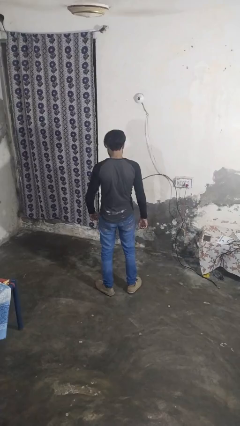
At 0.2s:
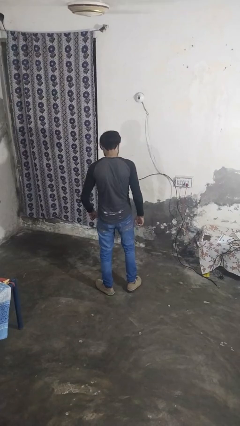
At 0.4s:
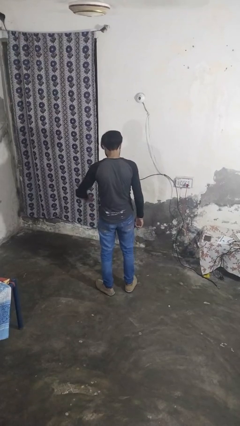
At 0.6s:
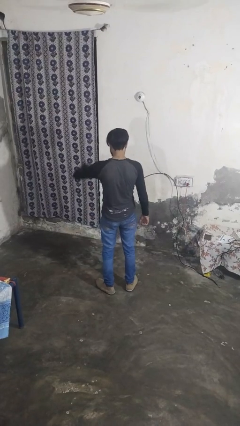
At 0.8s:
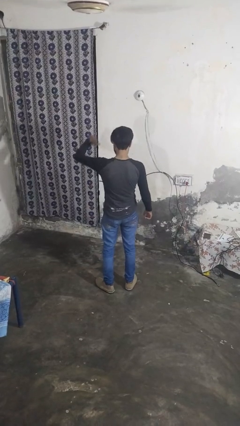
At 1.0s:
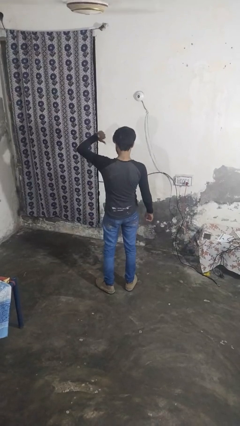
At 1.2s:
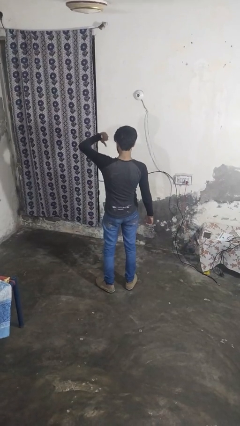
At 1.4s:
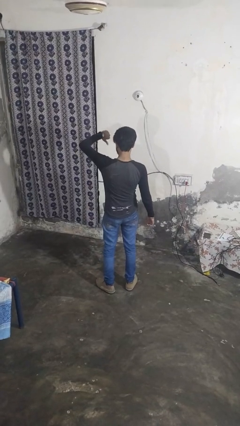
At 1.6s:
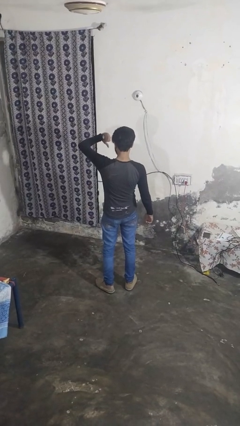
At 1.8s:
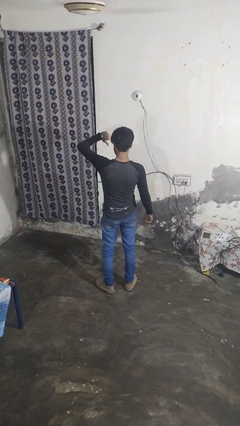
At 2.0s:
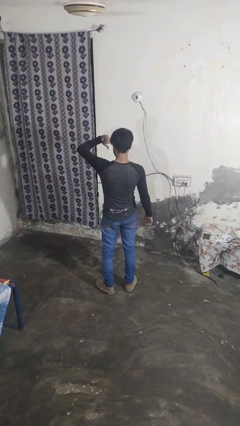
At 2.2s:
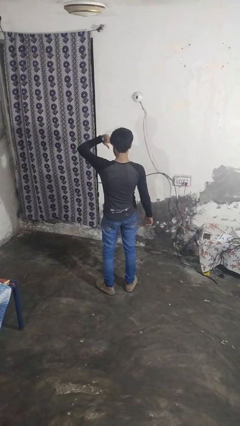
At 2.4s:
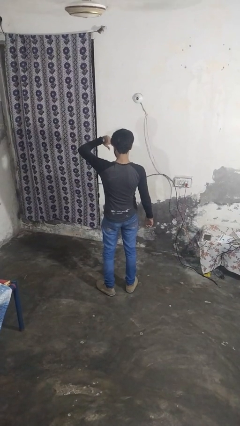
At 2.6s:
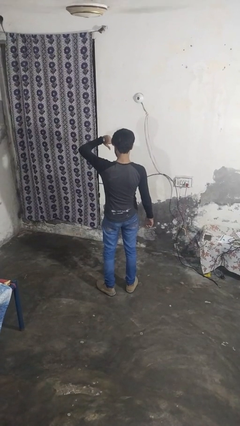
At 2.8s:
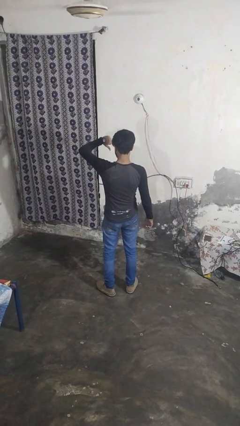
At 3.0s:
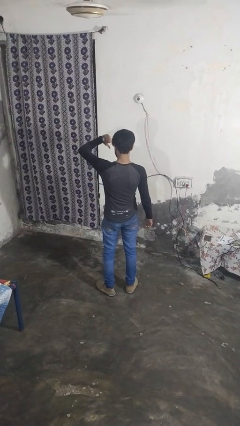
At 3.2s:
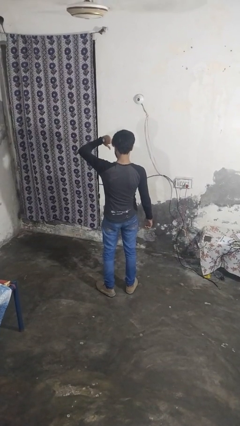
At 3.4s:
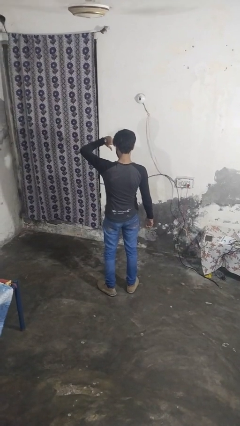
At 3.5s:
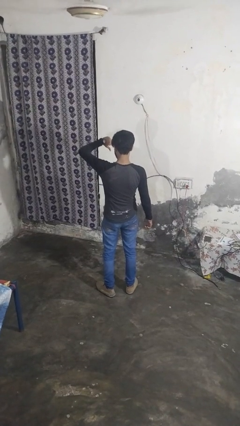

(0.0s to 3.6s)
person gestures thumbs down

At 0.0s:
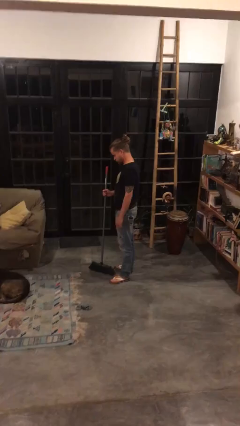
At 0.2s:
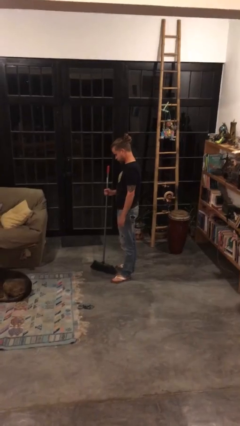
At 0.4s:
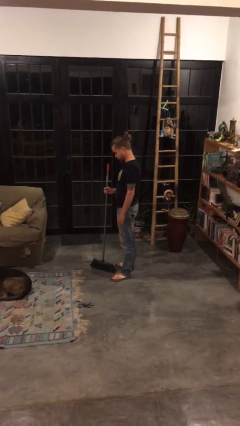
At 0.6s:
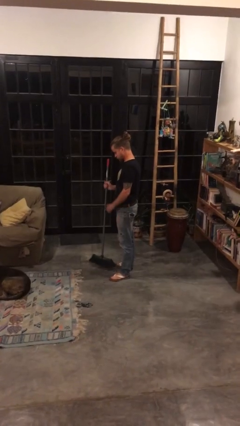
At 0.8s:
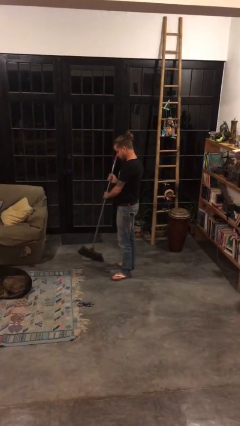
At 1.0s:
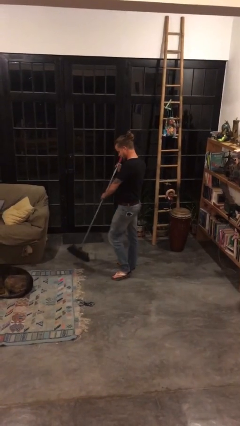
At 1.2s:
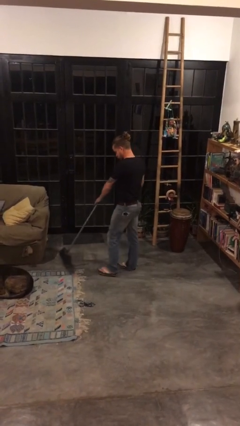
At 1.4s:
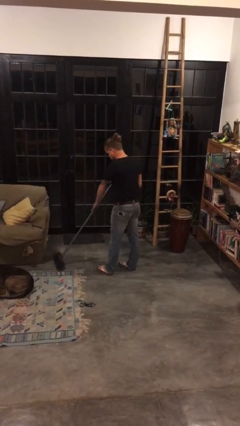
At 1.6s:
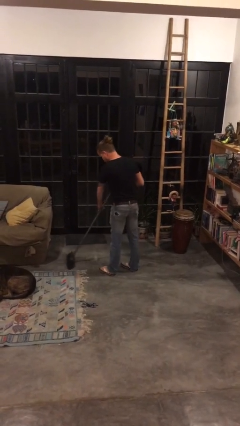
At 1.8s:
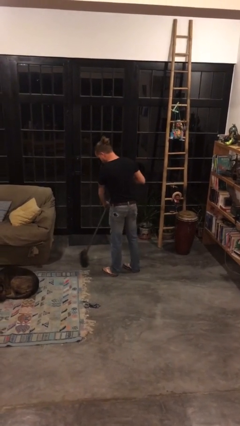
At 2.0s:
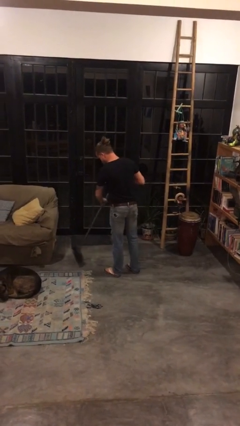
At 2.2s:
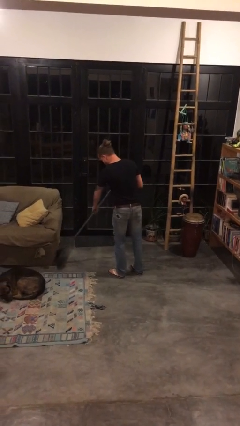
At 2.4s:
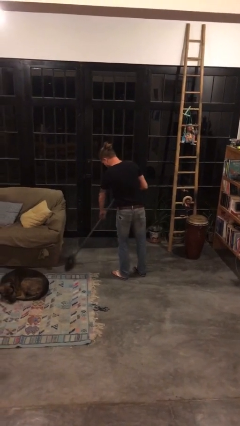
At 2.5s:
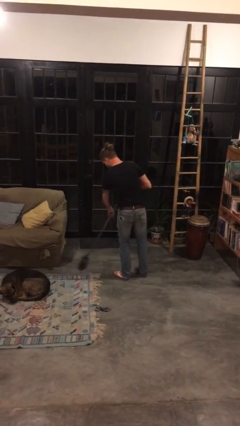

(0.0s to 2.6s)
person sweeps floor

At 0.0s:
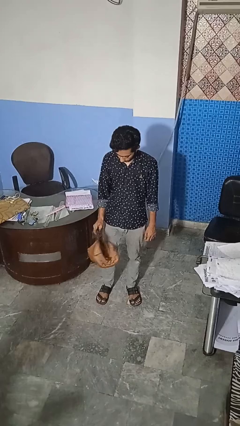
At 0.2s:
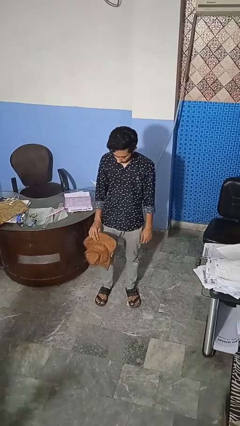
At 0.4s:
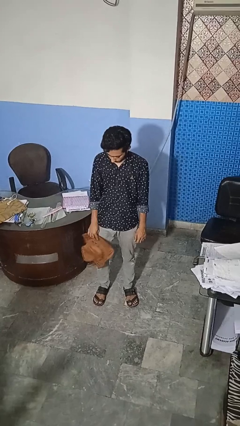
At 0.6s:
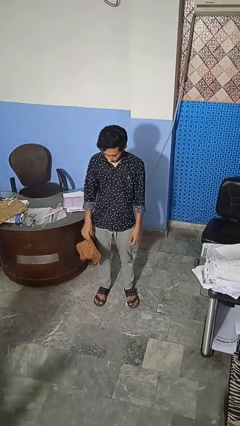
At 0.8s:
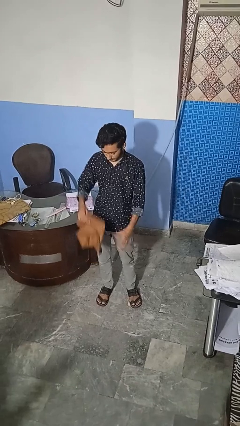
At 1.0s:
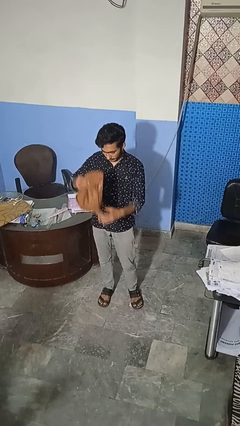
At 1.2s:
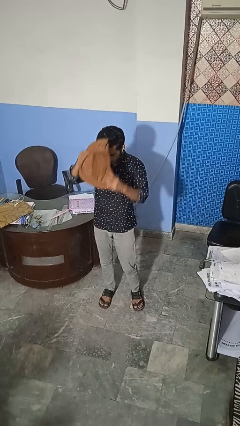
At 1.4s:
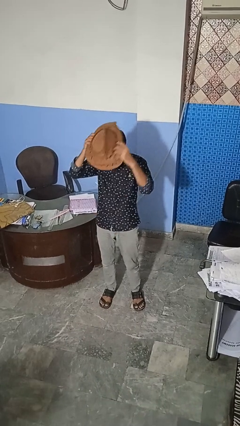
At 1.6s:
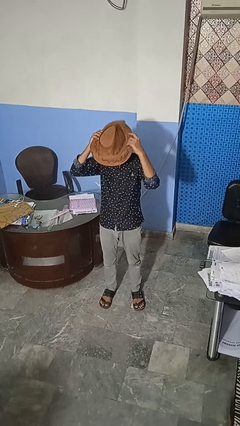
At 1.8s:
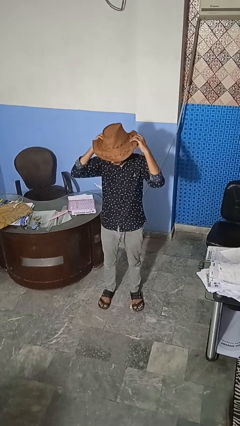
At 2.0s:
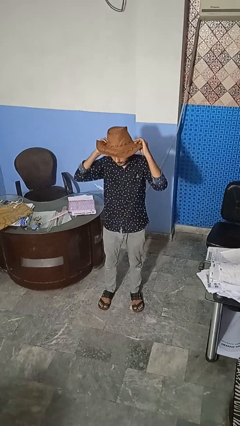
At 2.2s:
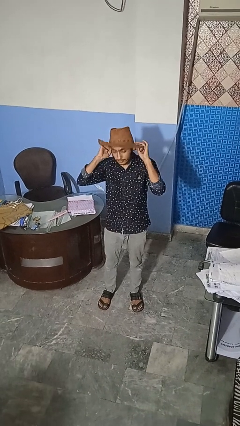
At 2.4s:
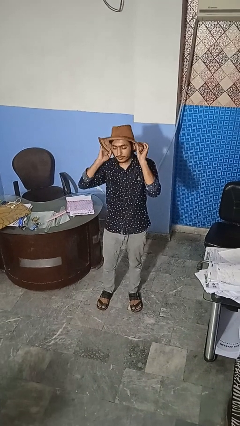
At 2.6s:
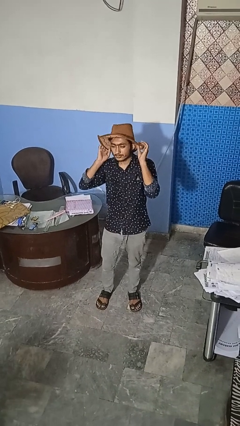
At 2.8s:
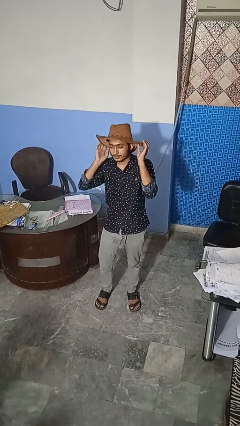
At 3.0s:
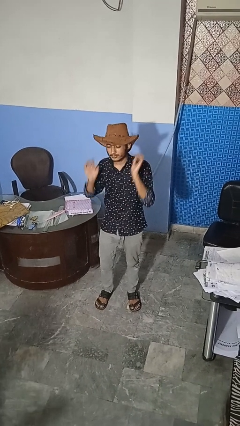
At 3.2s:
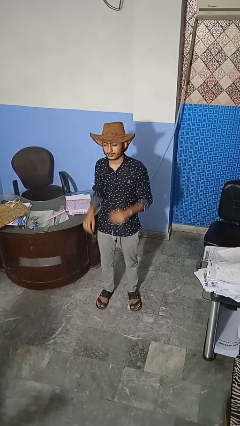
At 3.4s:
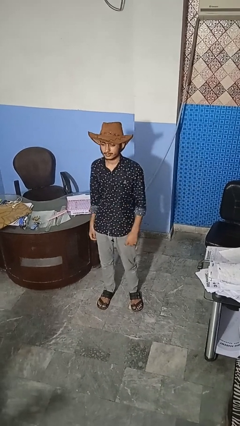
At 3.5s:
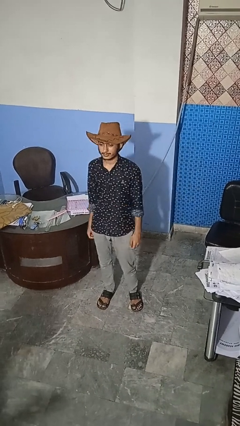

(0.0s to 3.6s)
person puts on hat

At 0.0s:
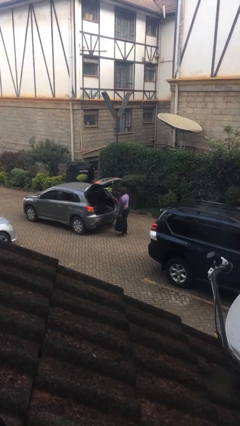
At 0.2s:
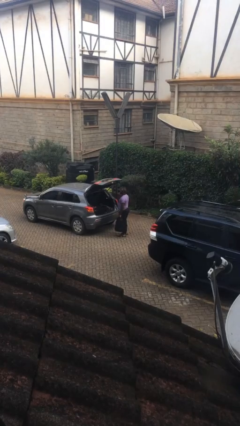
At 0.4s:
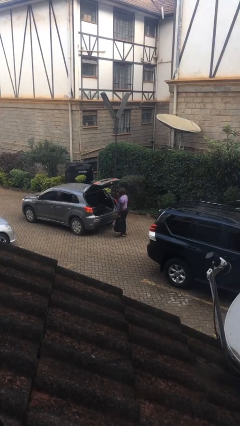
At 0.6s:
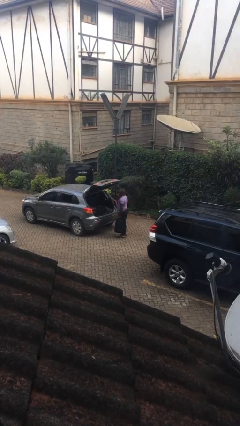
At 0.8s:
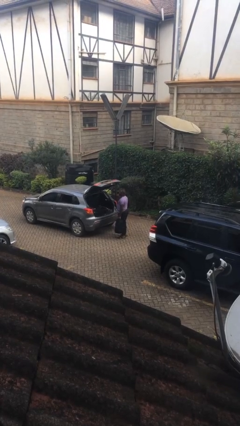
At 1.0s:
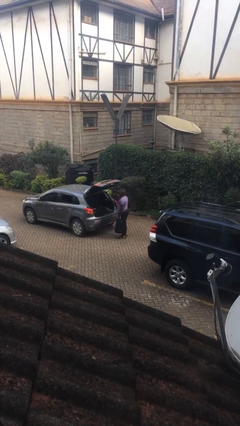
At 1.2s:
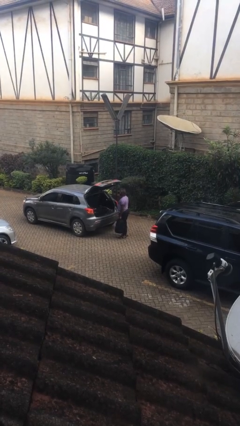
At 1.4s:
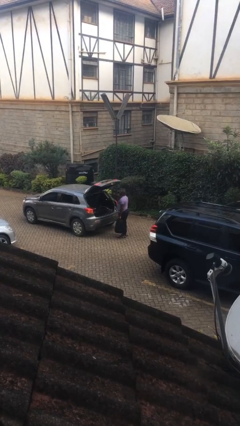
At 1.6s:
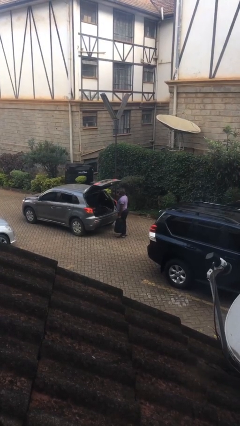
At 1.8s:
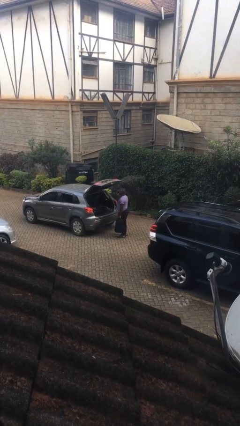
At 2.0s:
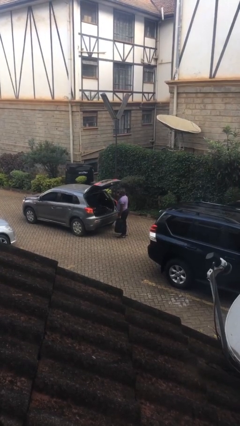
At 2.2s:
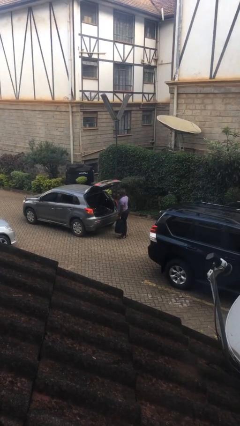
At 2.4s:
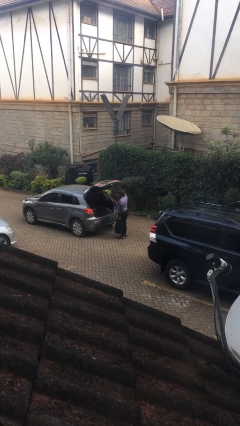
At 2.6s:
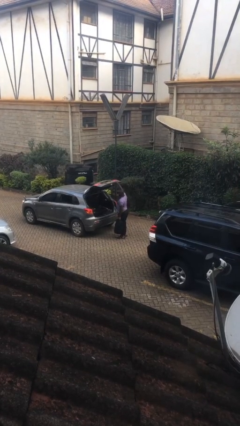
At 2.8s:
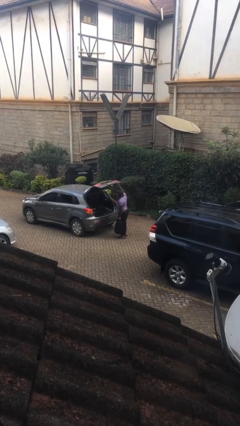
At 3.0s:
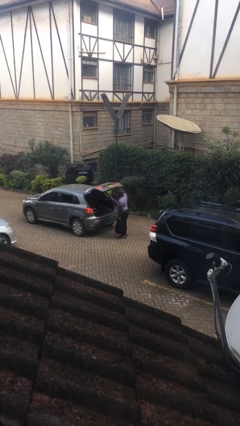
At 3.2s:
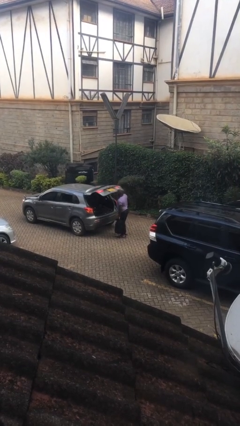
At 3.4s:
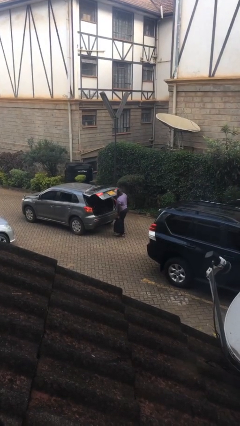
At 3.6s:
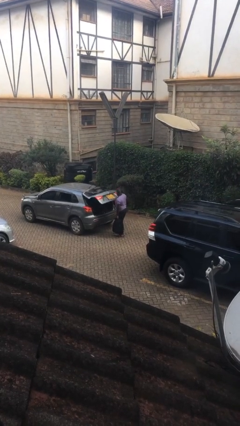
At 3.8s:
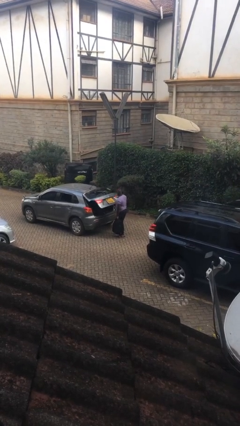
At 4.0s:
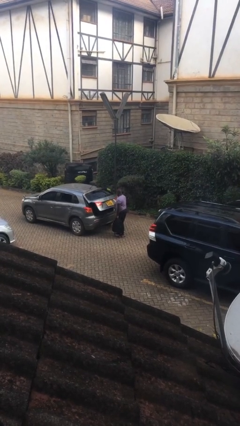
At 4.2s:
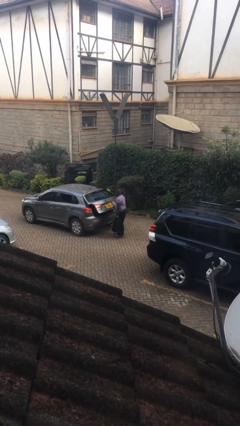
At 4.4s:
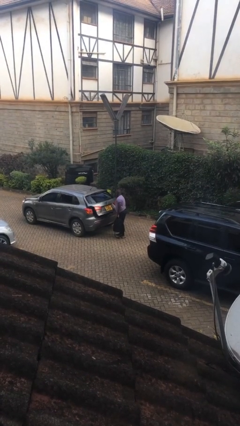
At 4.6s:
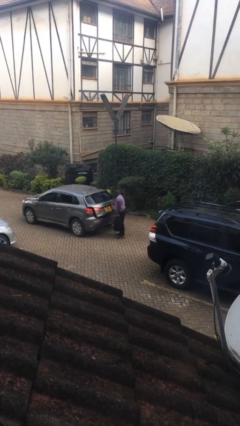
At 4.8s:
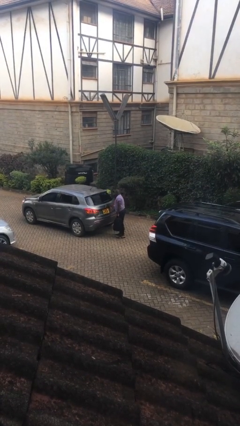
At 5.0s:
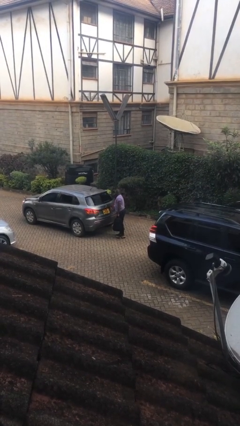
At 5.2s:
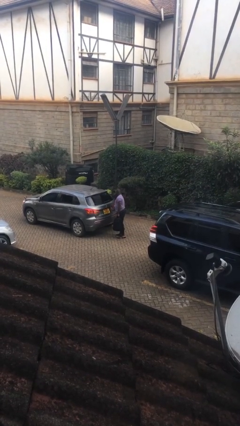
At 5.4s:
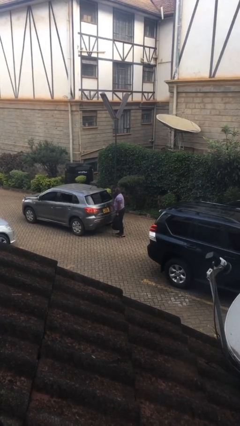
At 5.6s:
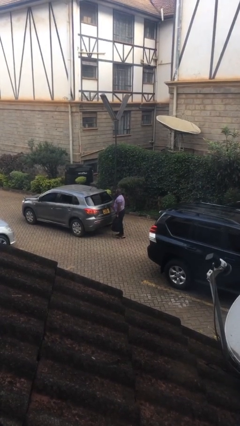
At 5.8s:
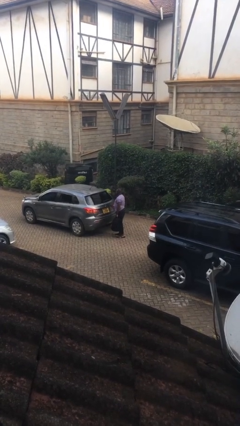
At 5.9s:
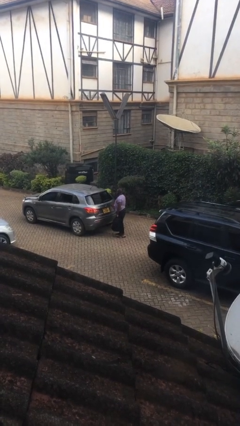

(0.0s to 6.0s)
person closes car trunk

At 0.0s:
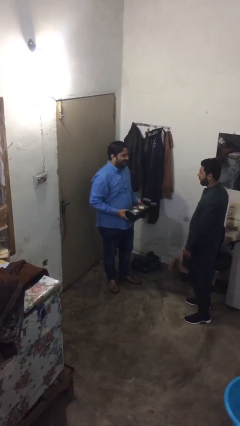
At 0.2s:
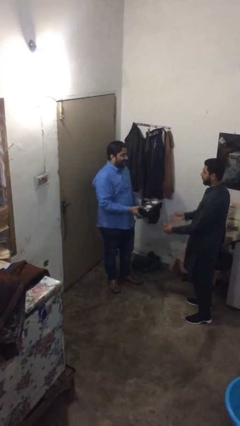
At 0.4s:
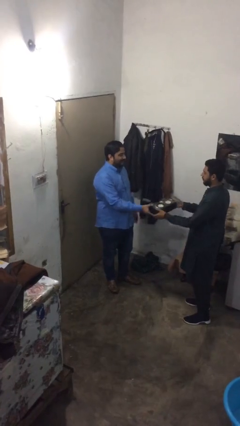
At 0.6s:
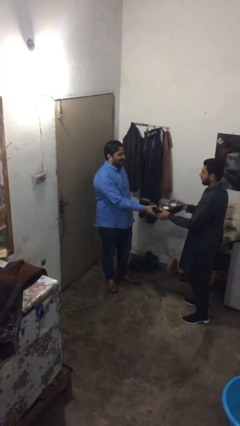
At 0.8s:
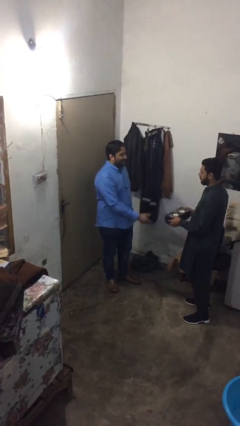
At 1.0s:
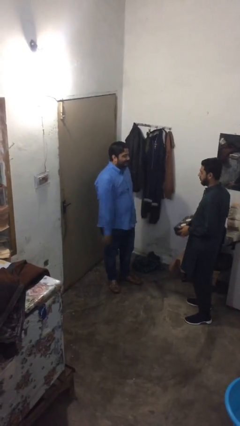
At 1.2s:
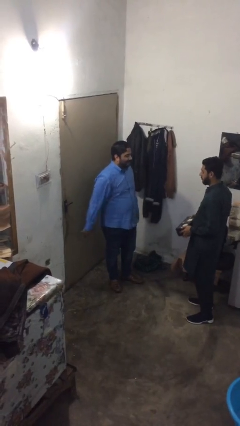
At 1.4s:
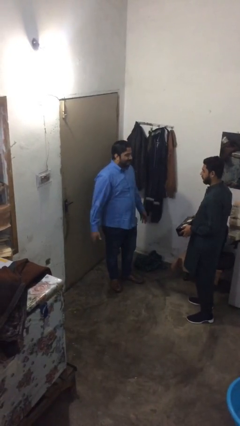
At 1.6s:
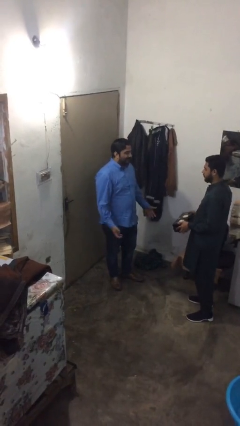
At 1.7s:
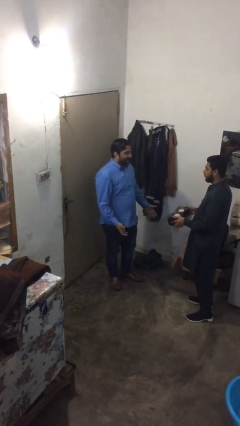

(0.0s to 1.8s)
person transfers object to person

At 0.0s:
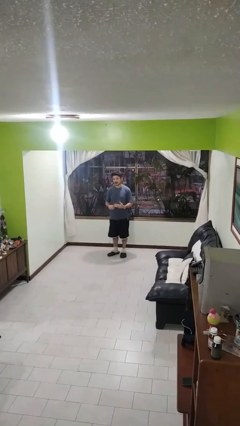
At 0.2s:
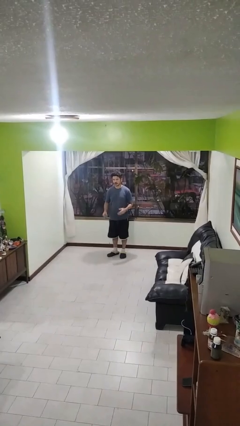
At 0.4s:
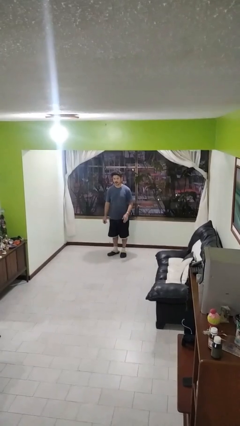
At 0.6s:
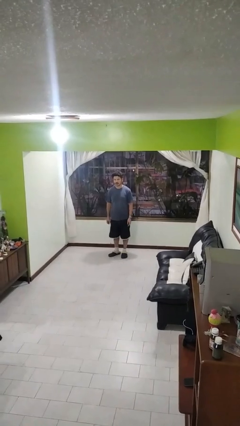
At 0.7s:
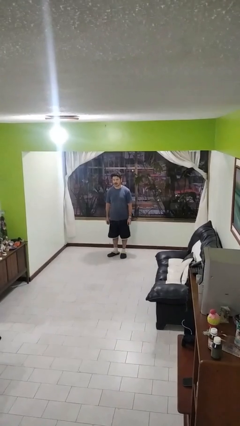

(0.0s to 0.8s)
person takes off ring
